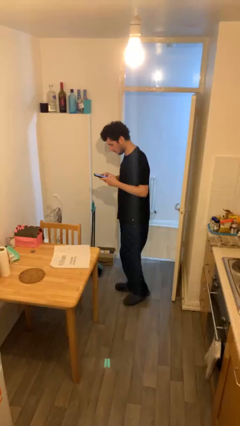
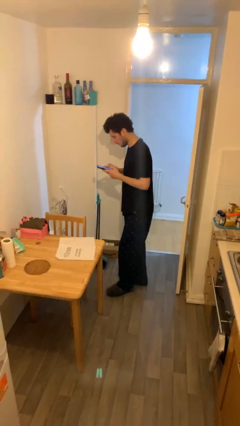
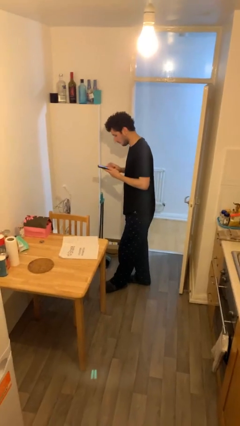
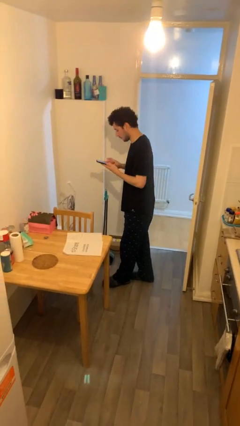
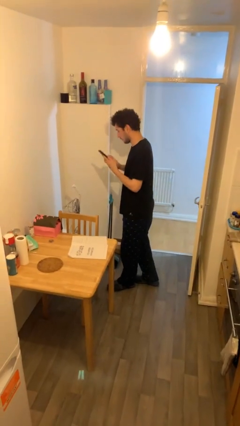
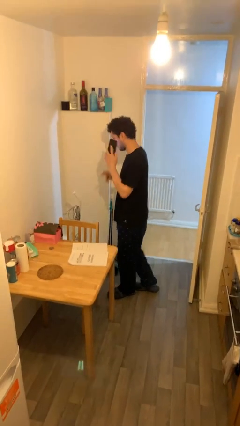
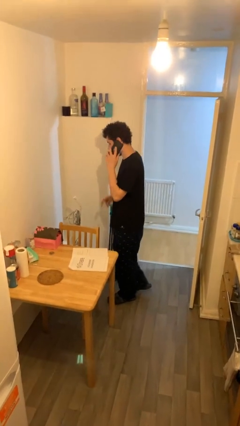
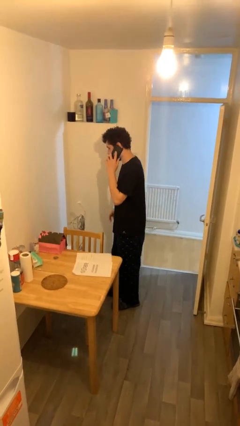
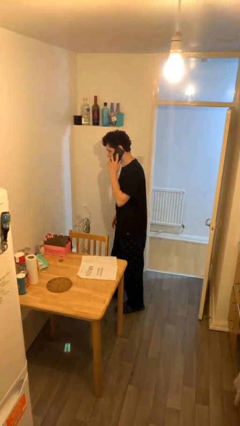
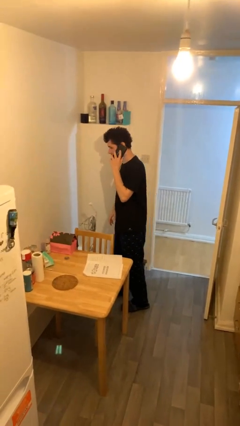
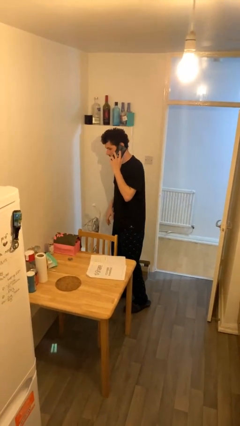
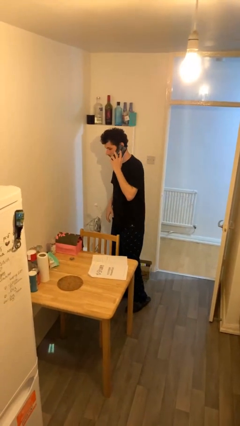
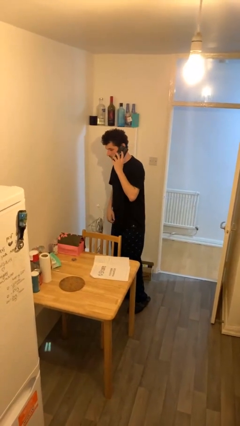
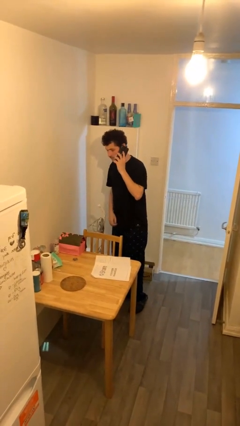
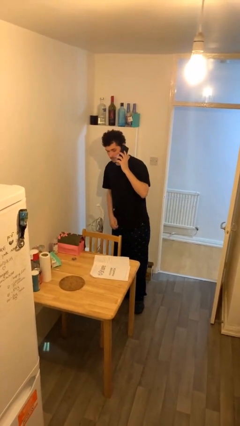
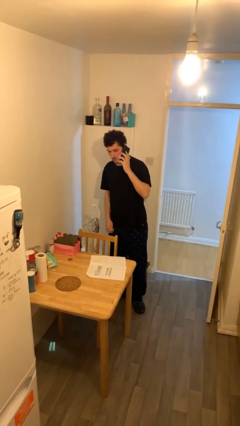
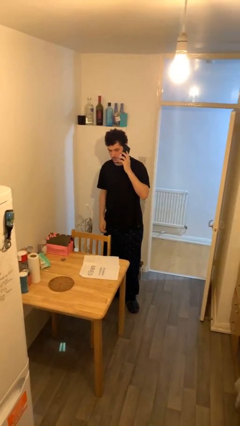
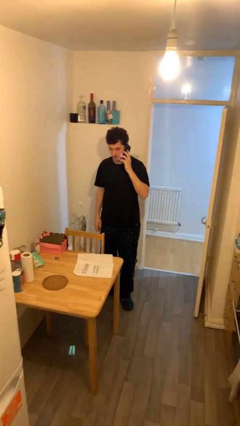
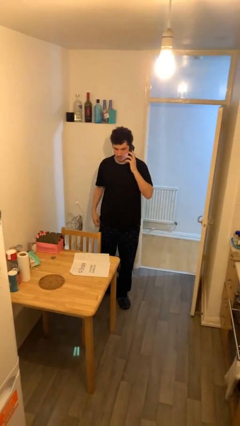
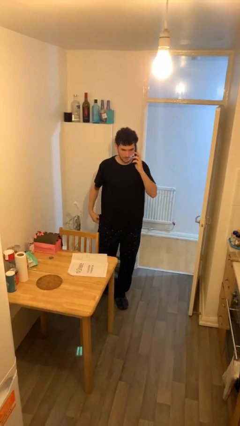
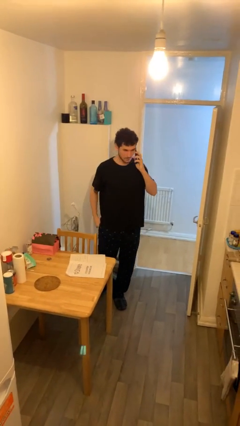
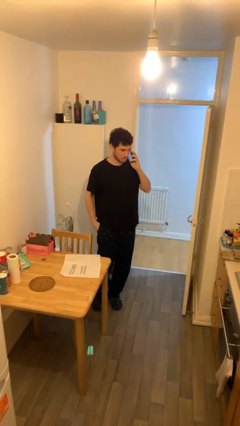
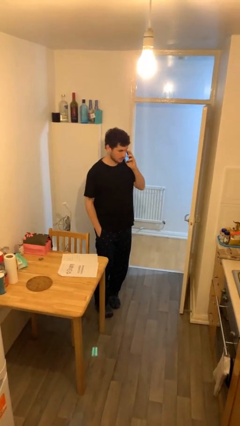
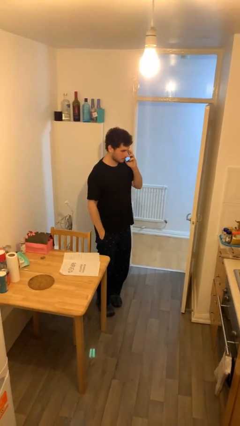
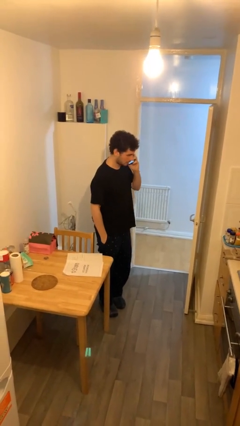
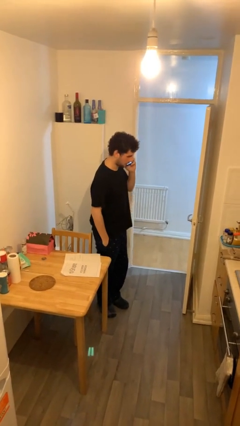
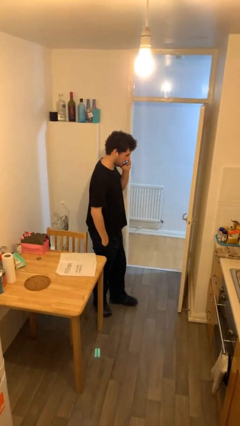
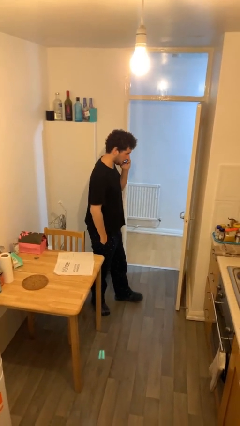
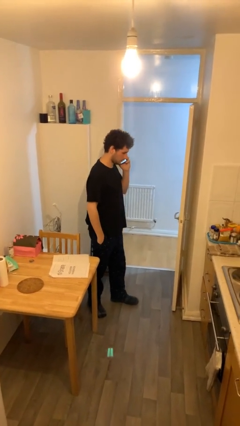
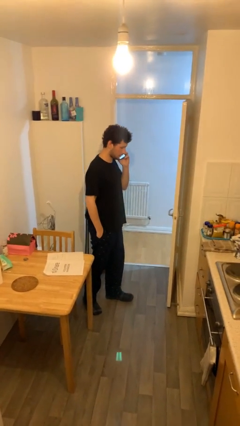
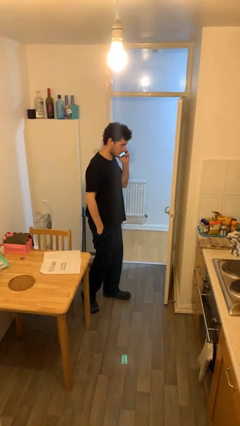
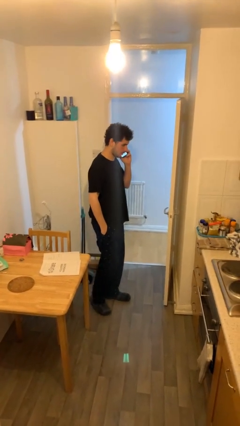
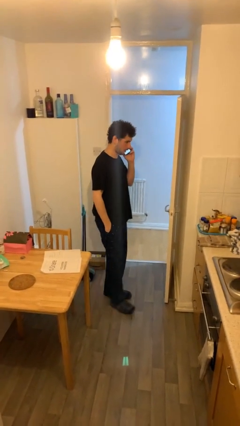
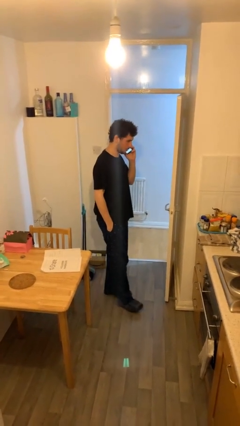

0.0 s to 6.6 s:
person talks on phone

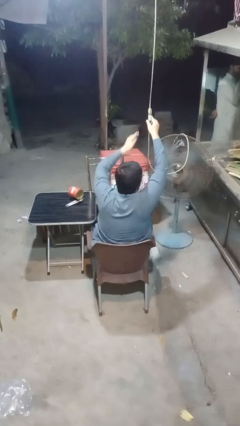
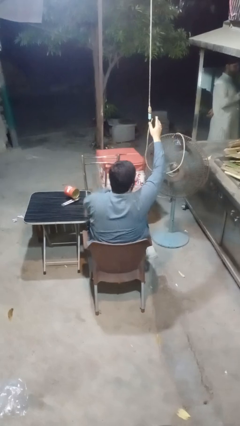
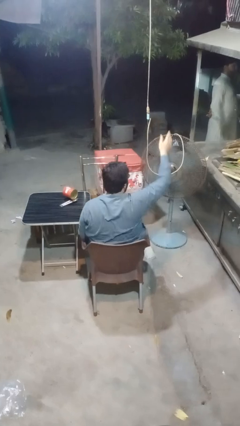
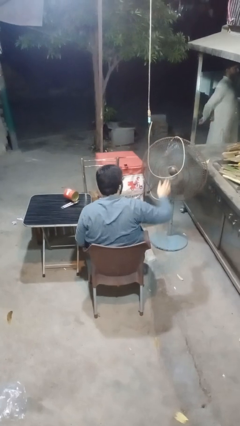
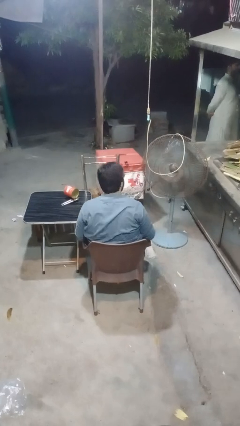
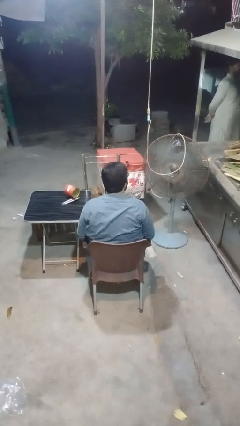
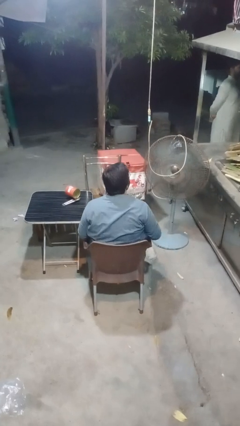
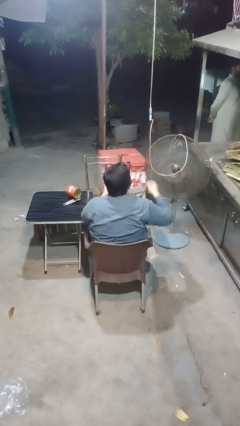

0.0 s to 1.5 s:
person turns off fan

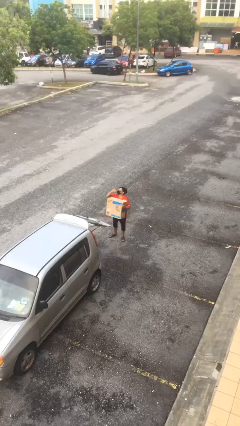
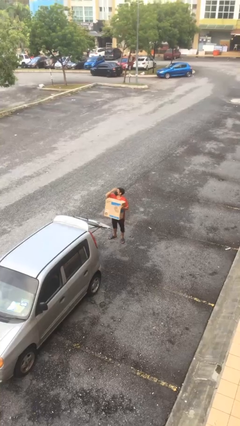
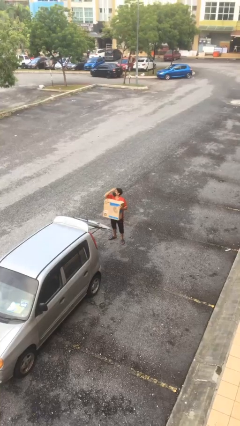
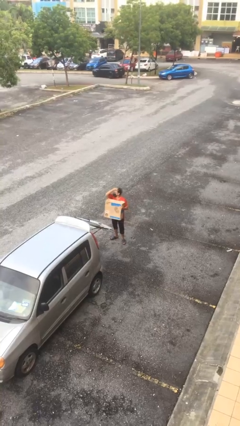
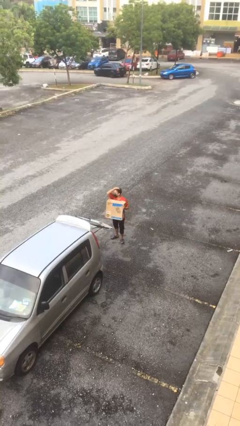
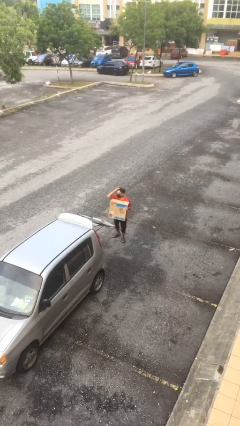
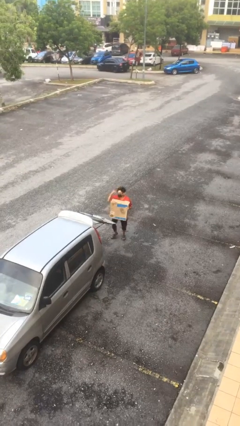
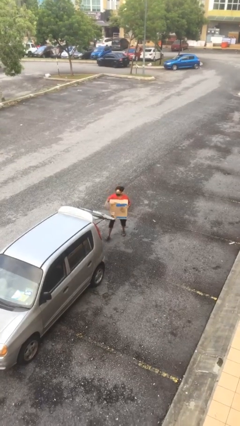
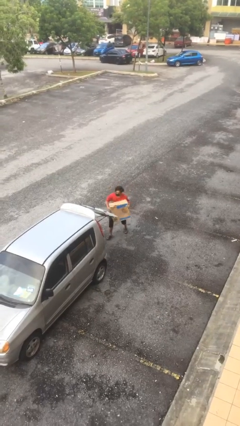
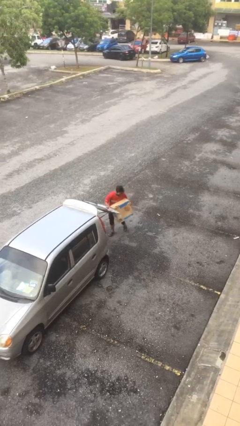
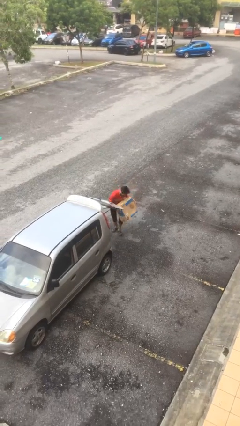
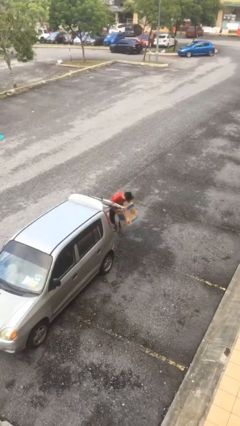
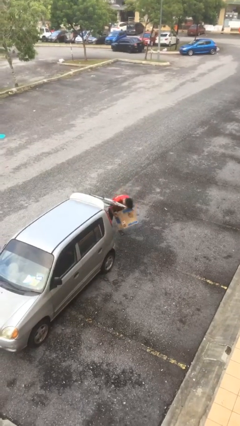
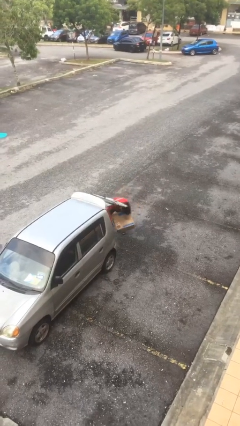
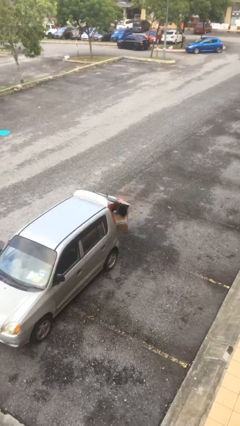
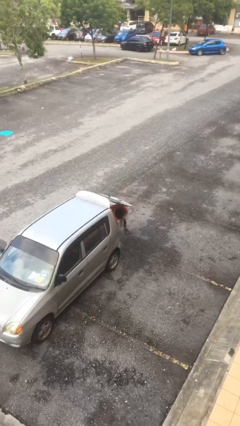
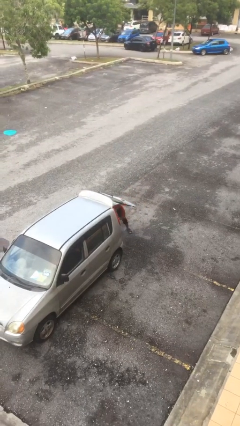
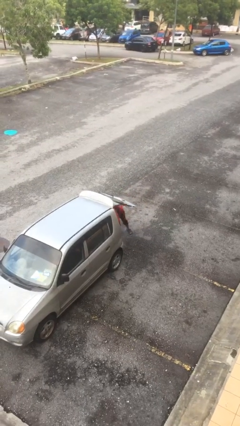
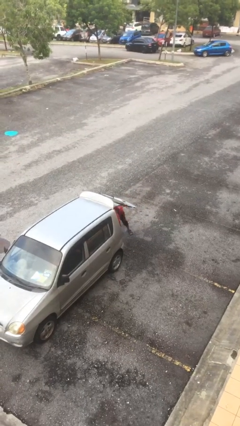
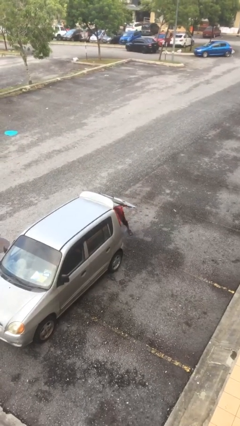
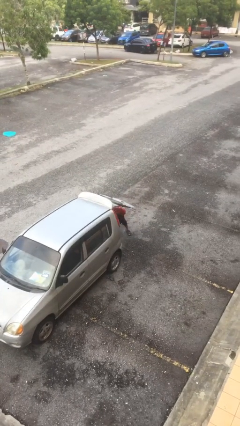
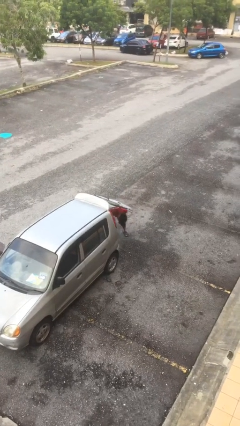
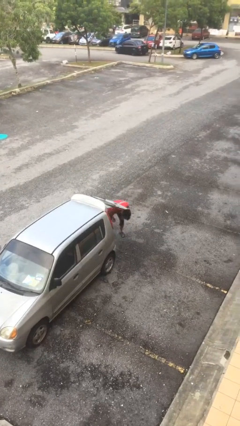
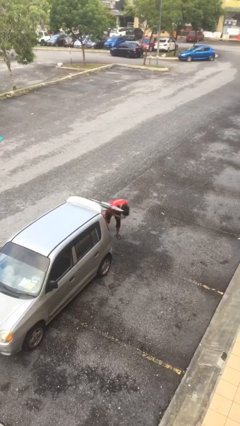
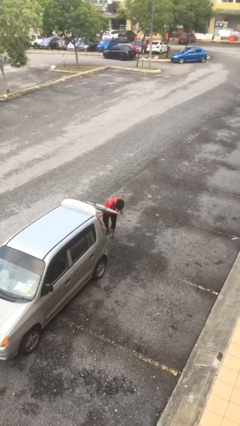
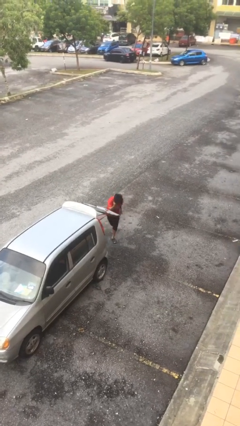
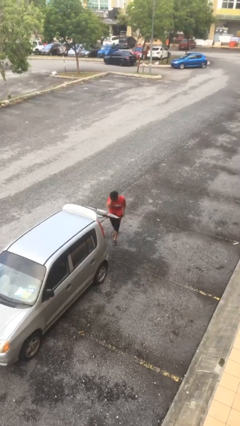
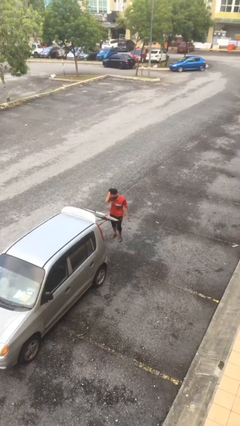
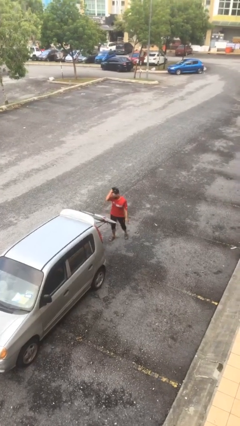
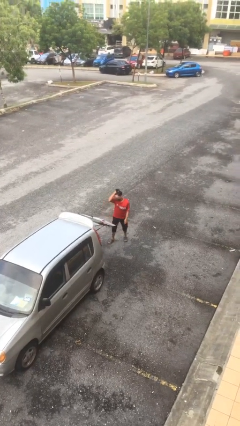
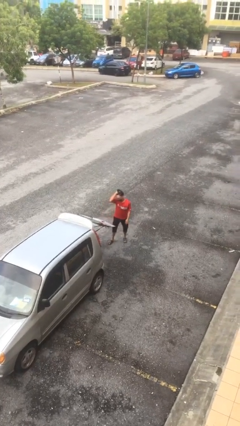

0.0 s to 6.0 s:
person loads car

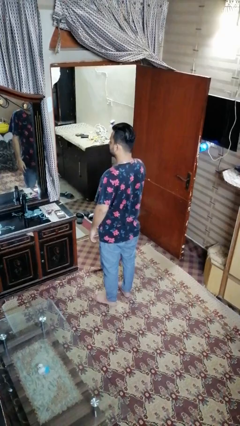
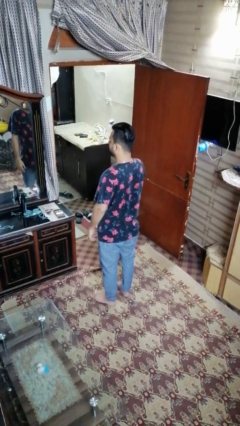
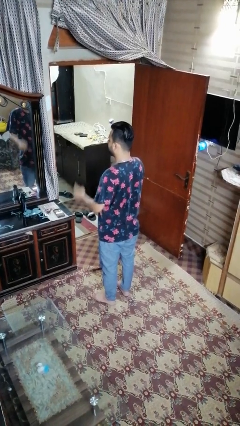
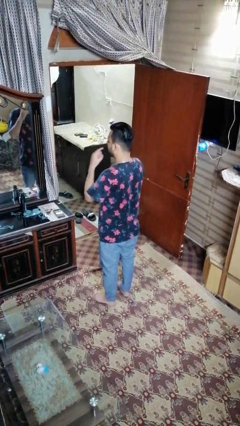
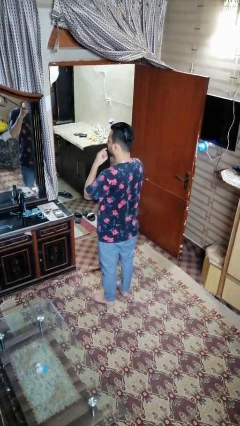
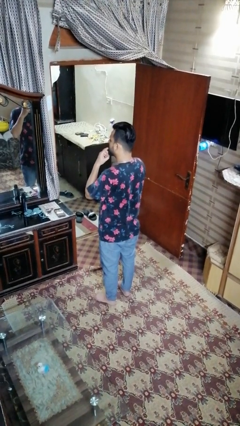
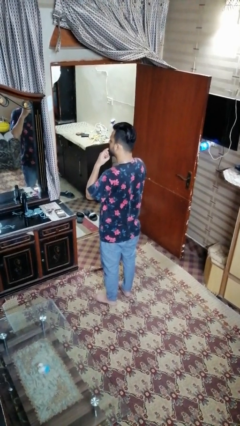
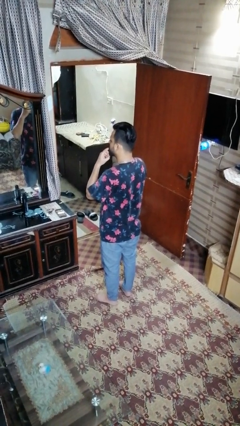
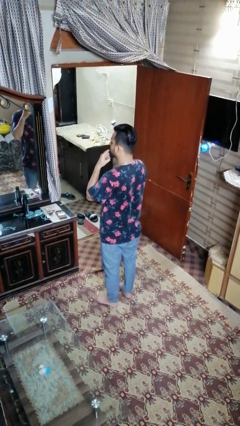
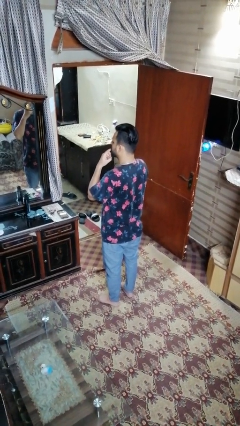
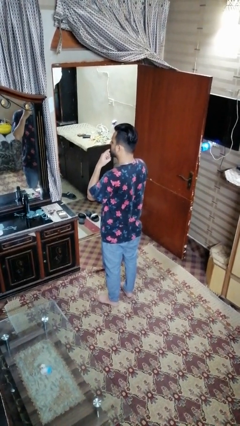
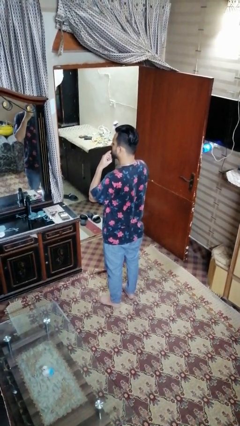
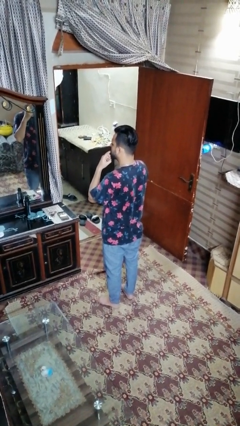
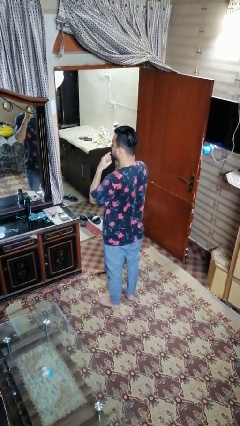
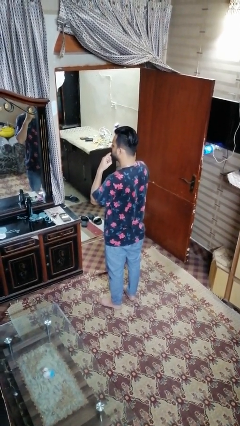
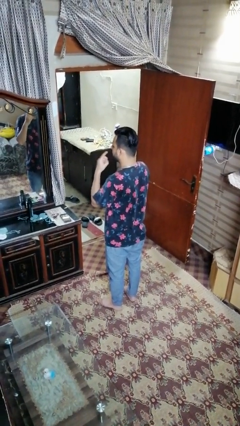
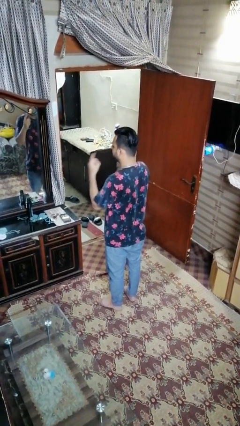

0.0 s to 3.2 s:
person licks fingers

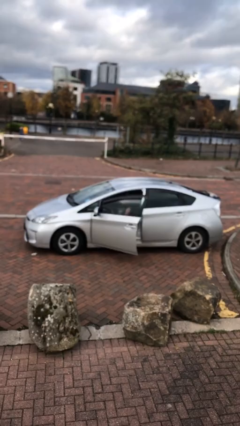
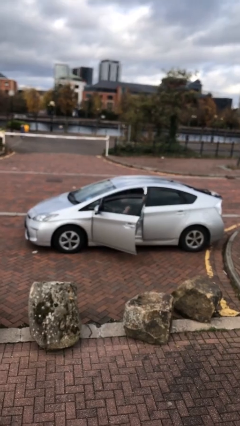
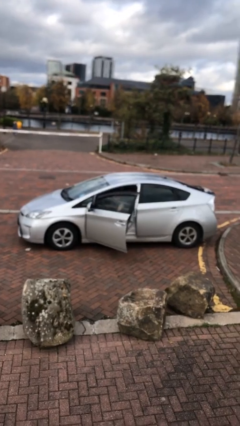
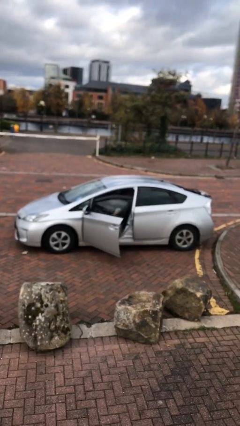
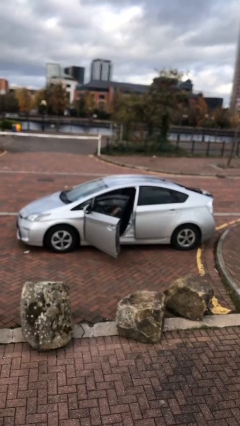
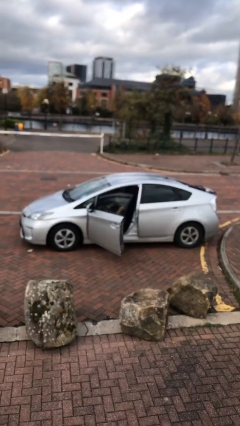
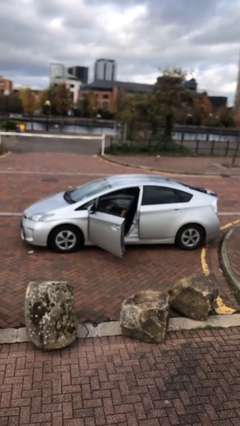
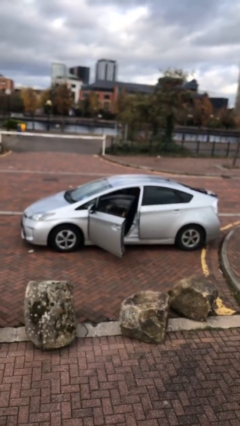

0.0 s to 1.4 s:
person opens car door
